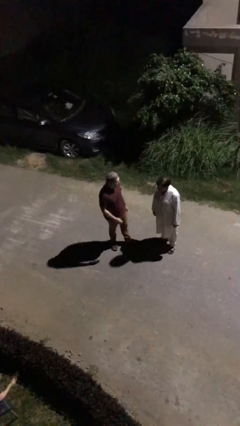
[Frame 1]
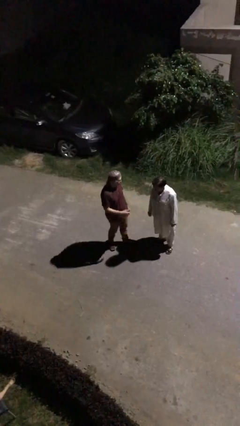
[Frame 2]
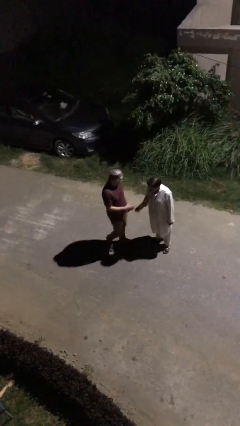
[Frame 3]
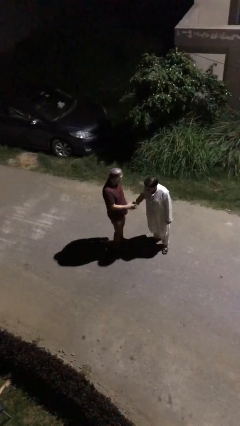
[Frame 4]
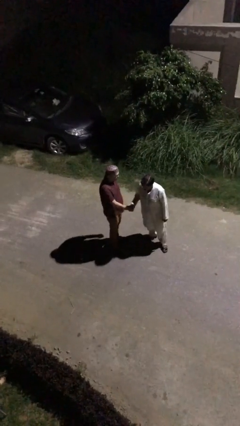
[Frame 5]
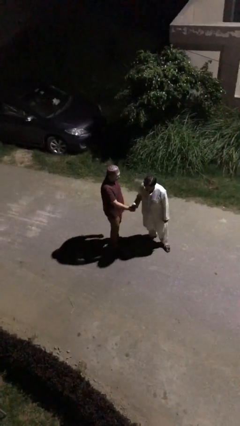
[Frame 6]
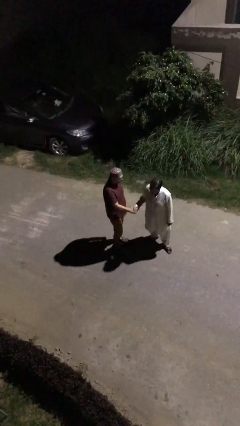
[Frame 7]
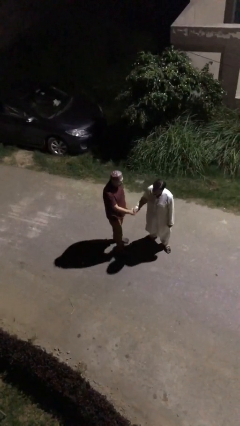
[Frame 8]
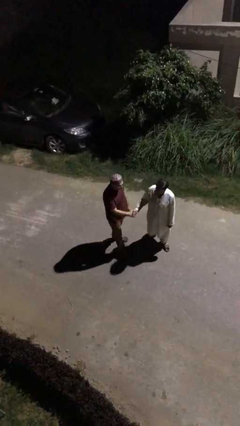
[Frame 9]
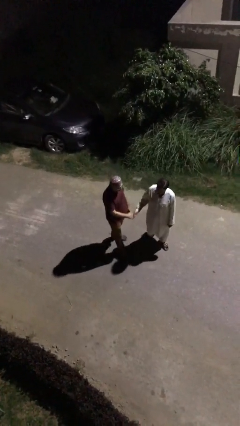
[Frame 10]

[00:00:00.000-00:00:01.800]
person shakes hand

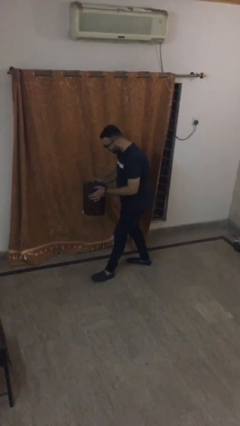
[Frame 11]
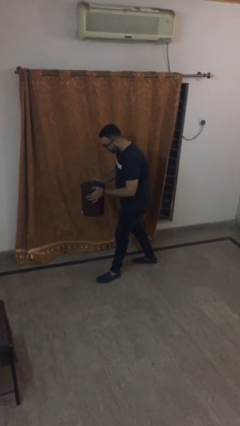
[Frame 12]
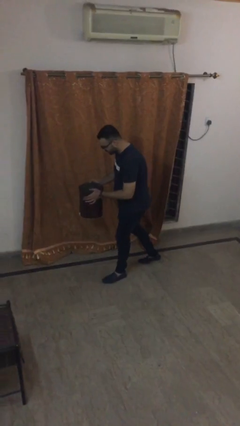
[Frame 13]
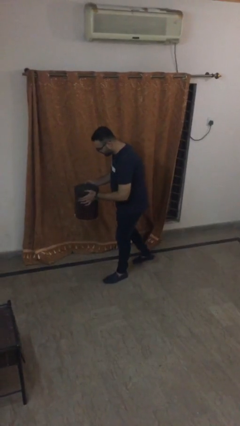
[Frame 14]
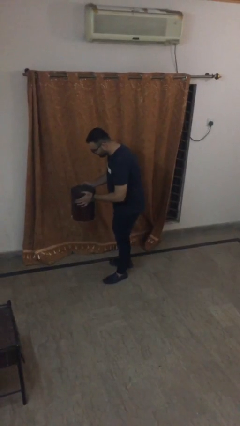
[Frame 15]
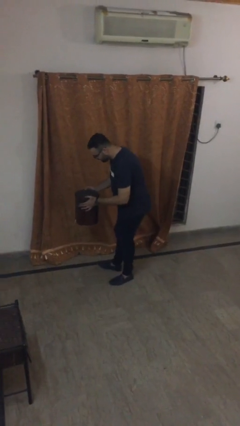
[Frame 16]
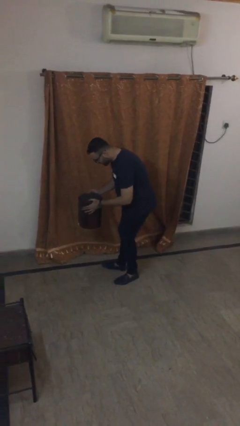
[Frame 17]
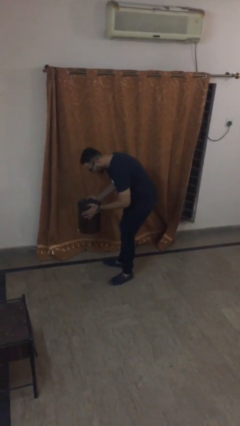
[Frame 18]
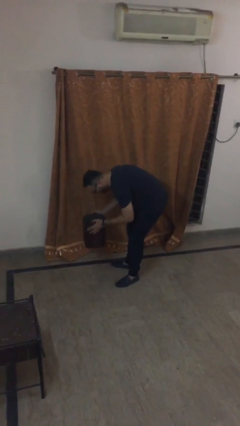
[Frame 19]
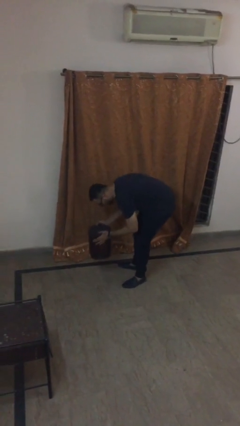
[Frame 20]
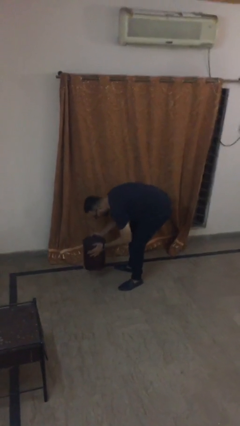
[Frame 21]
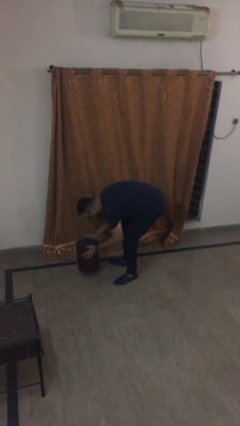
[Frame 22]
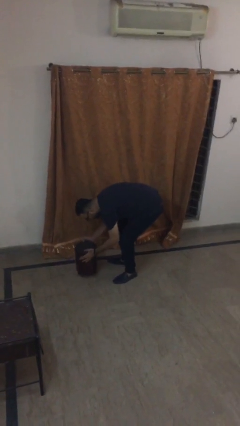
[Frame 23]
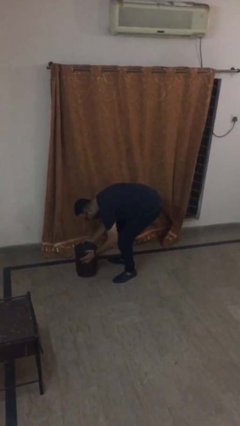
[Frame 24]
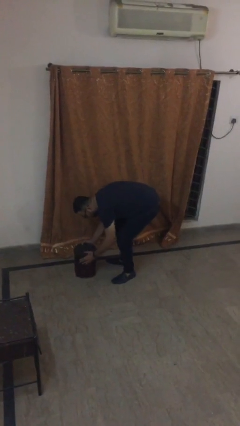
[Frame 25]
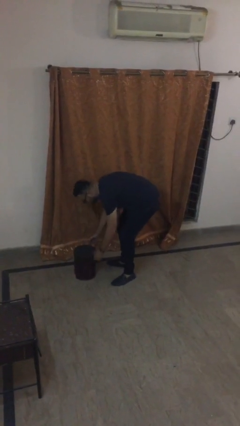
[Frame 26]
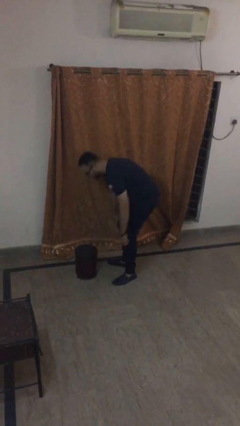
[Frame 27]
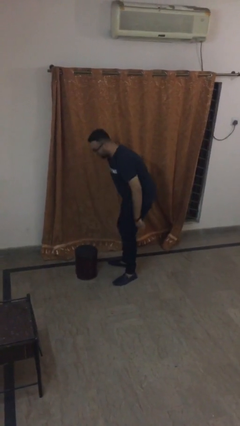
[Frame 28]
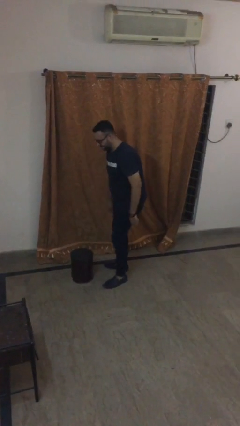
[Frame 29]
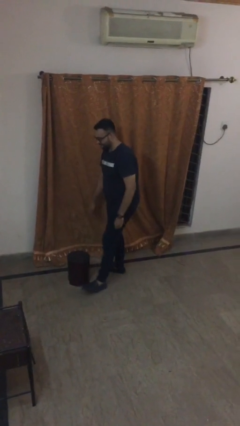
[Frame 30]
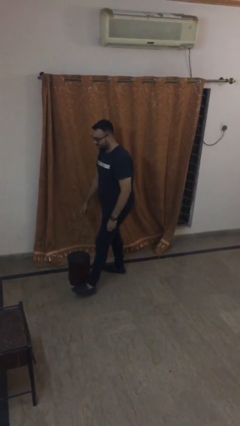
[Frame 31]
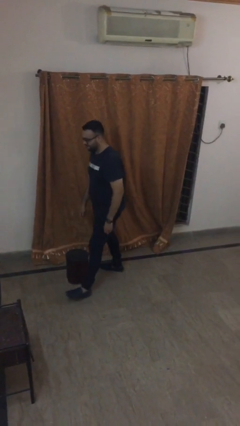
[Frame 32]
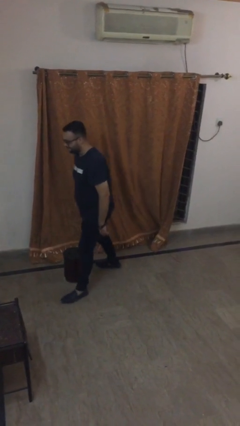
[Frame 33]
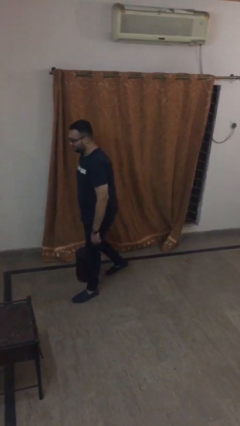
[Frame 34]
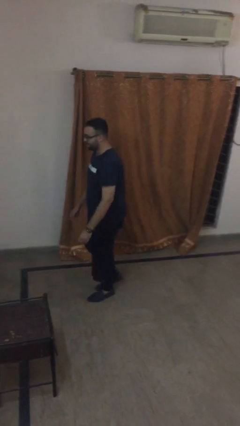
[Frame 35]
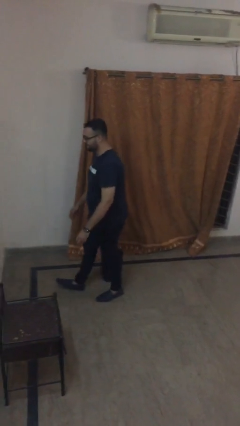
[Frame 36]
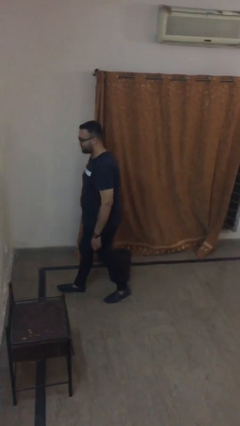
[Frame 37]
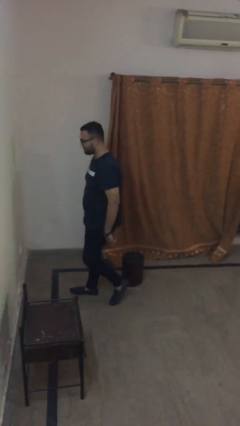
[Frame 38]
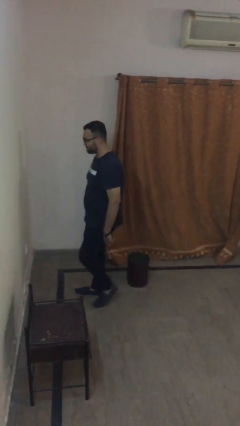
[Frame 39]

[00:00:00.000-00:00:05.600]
person puts down object on floor

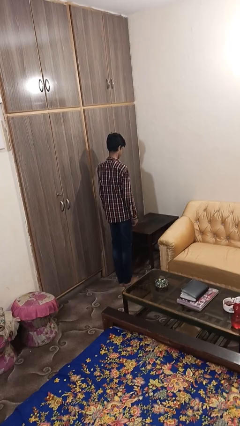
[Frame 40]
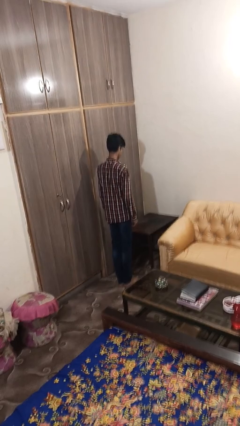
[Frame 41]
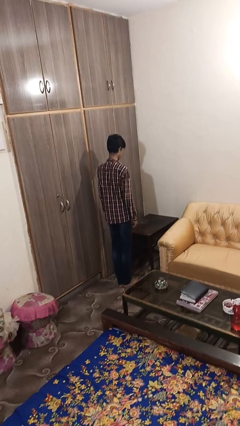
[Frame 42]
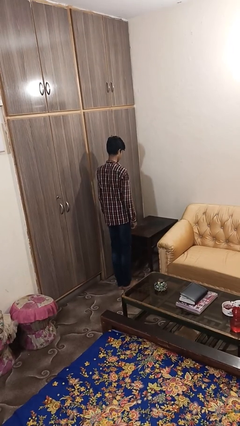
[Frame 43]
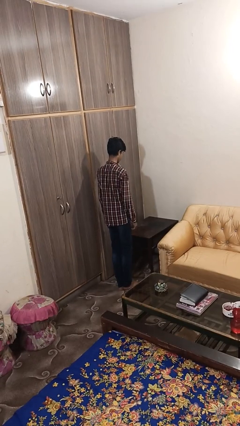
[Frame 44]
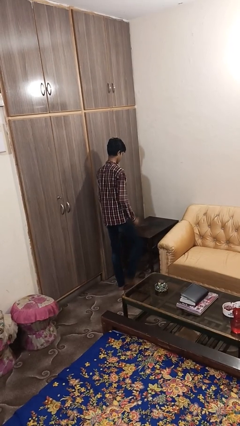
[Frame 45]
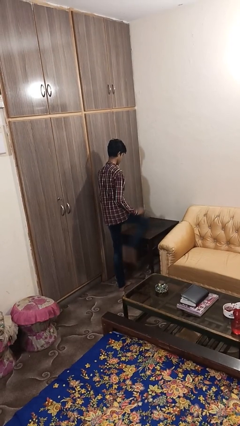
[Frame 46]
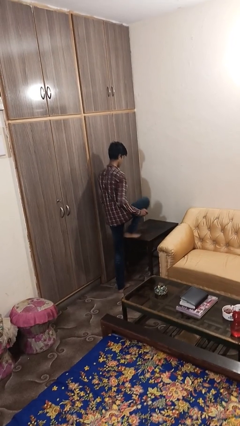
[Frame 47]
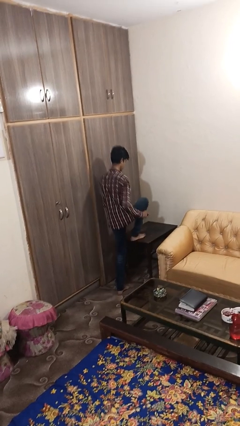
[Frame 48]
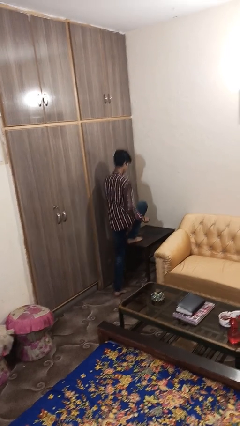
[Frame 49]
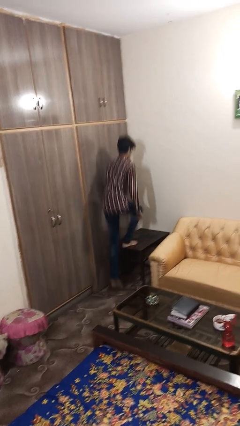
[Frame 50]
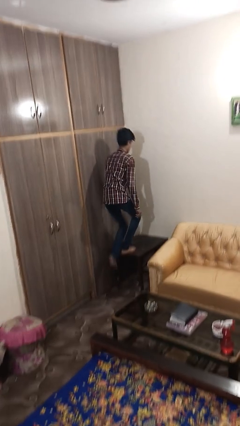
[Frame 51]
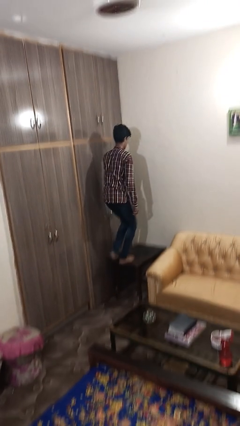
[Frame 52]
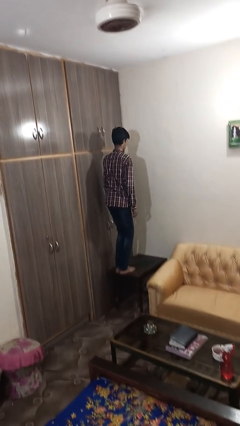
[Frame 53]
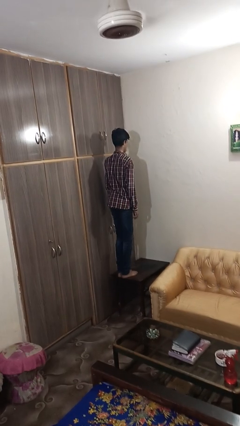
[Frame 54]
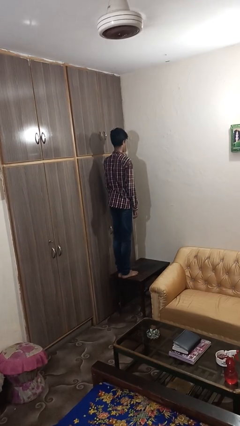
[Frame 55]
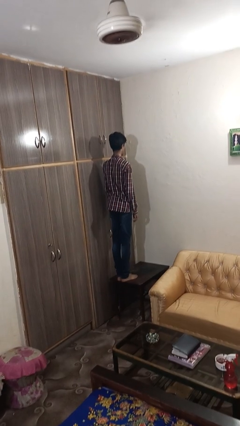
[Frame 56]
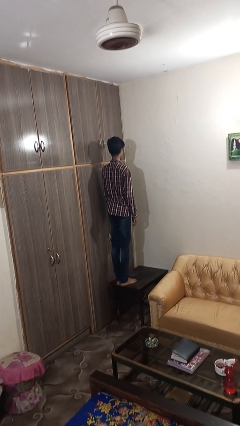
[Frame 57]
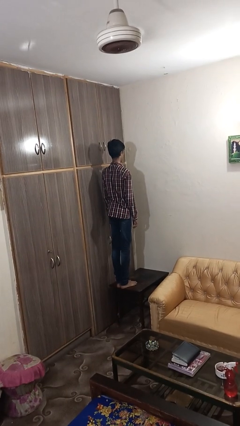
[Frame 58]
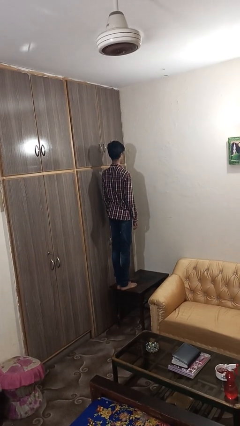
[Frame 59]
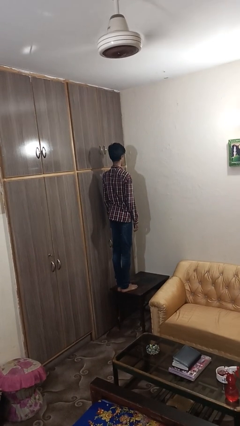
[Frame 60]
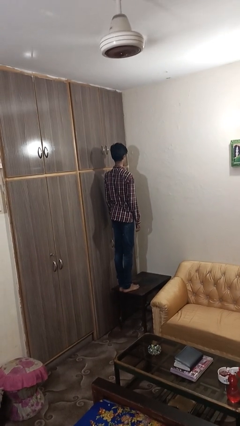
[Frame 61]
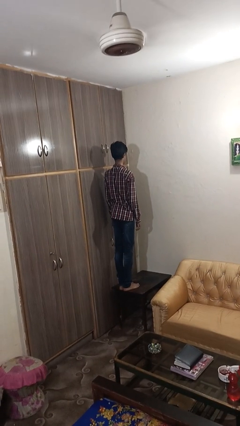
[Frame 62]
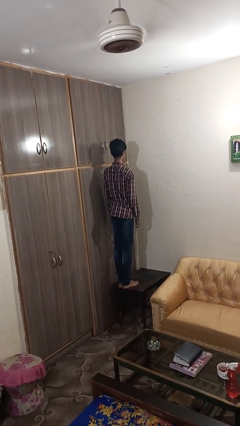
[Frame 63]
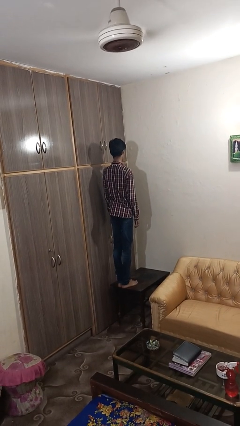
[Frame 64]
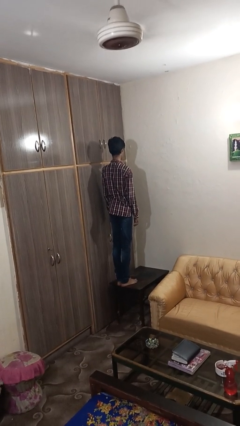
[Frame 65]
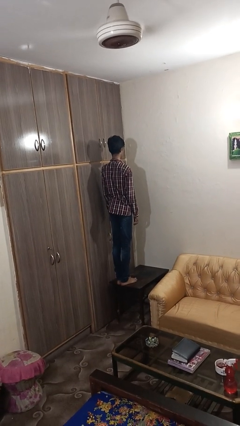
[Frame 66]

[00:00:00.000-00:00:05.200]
person climbs on table

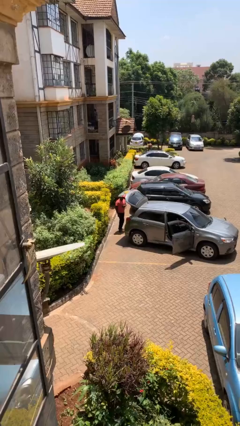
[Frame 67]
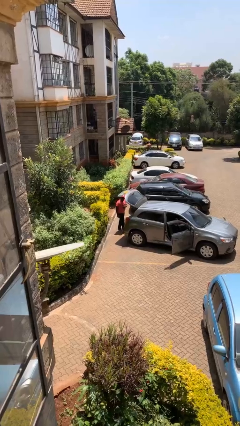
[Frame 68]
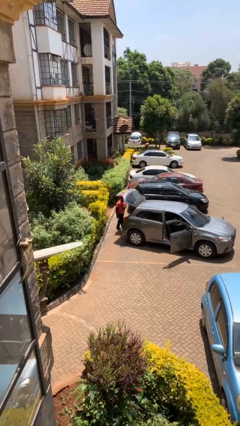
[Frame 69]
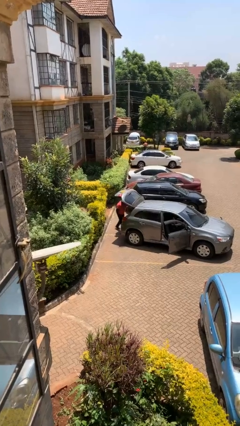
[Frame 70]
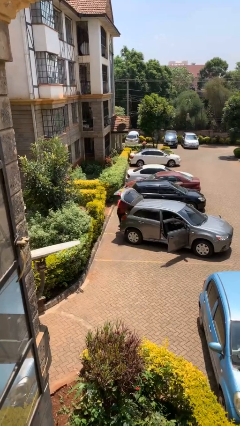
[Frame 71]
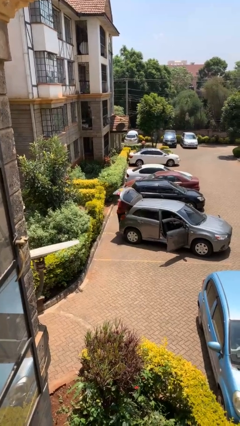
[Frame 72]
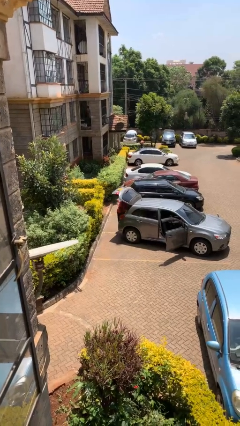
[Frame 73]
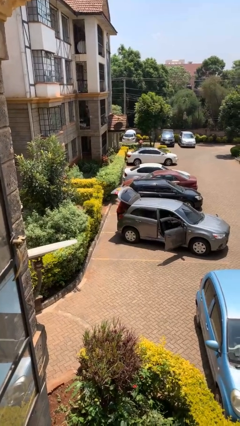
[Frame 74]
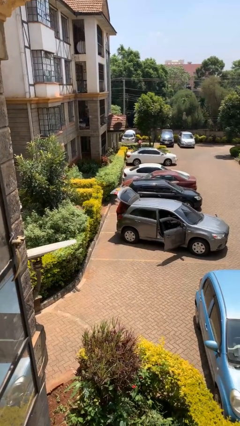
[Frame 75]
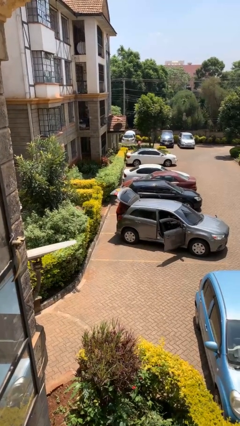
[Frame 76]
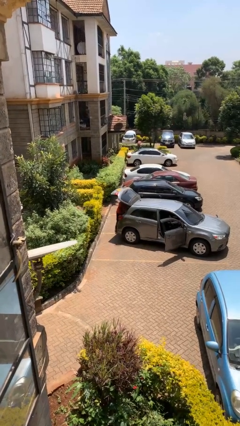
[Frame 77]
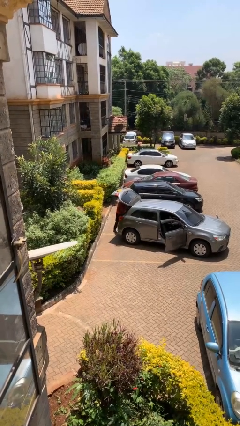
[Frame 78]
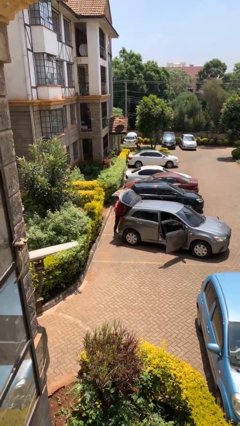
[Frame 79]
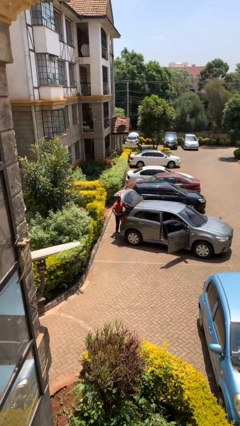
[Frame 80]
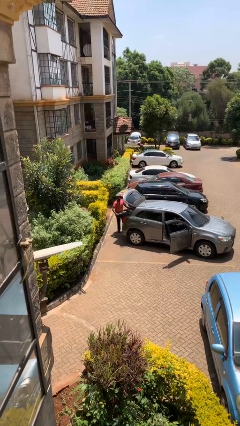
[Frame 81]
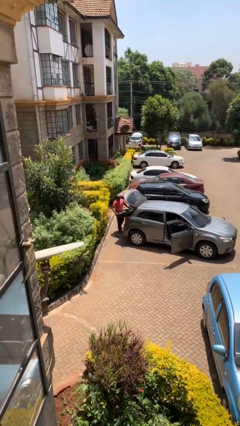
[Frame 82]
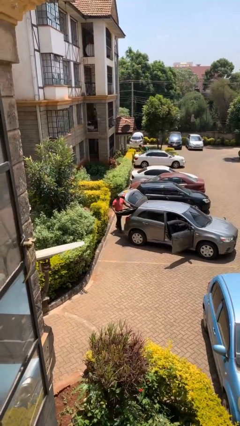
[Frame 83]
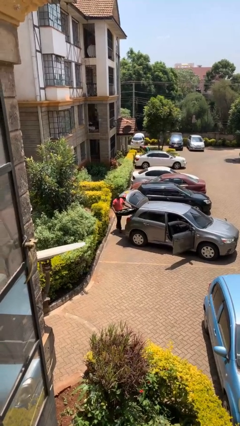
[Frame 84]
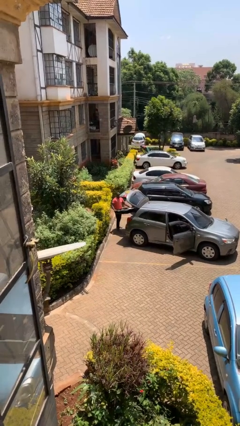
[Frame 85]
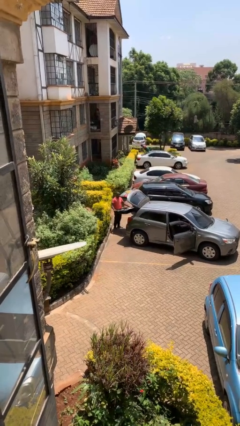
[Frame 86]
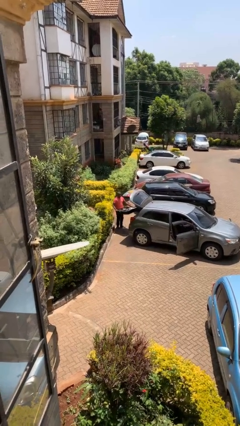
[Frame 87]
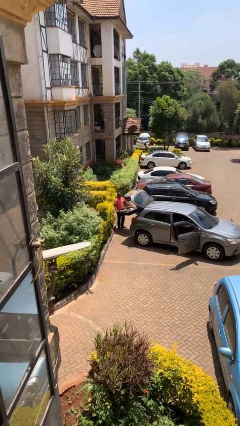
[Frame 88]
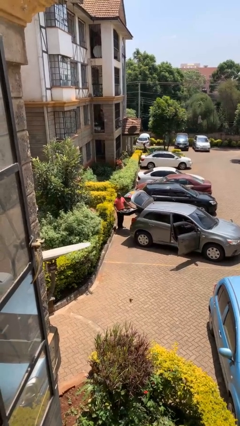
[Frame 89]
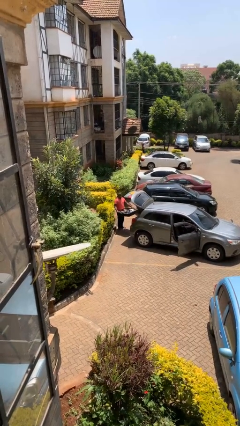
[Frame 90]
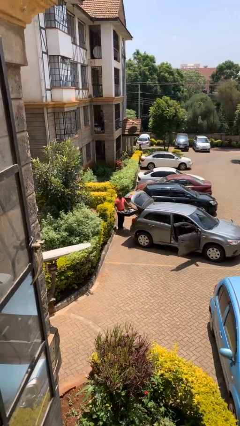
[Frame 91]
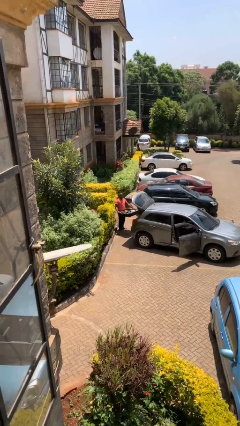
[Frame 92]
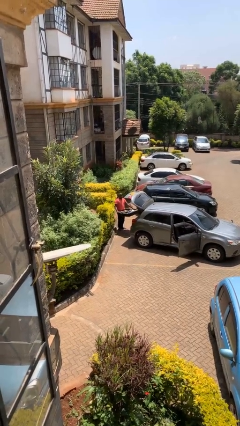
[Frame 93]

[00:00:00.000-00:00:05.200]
person unloads car
